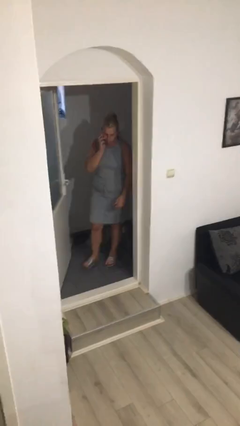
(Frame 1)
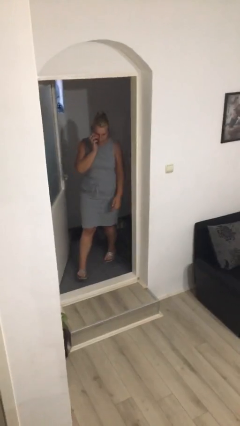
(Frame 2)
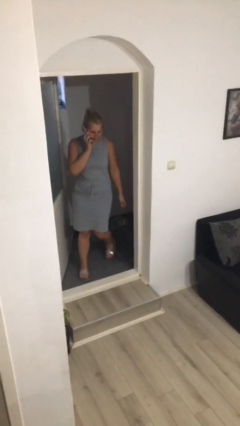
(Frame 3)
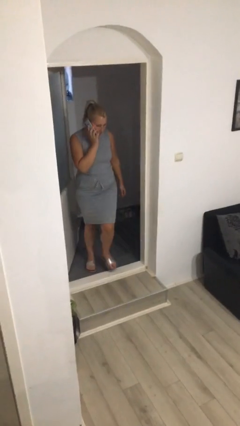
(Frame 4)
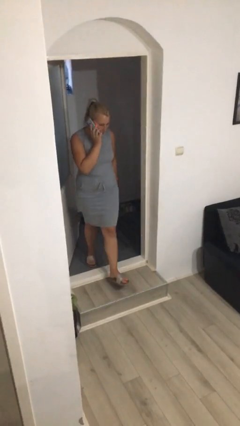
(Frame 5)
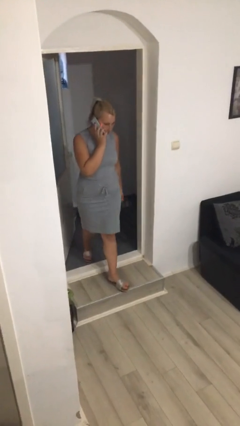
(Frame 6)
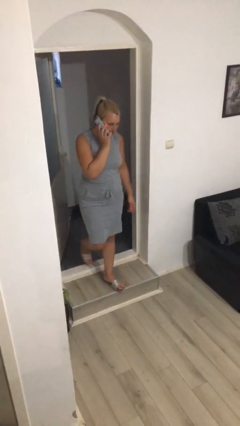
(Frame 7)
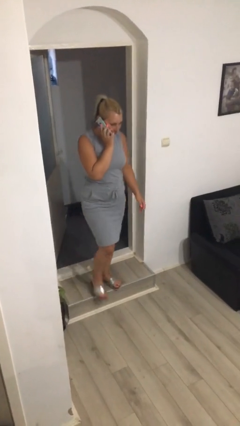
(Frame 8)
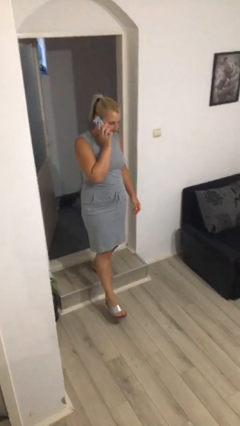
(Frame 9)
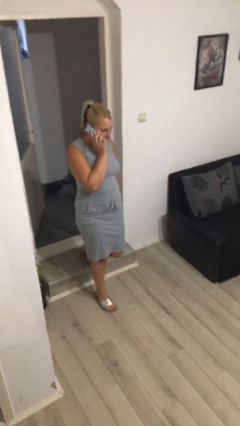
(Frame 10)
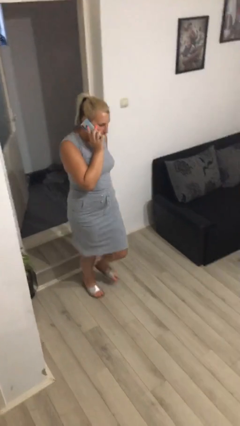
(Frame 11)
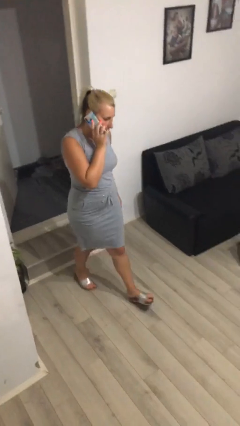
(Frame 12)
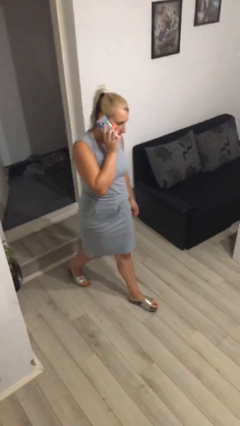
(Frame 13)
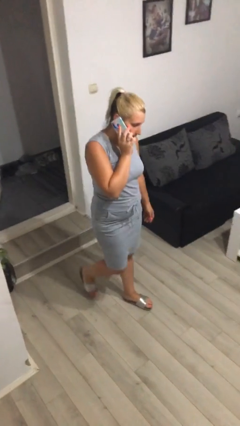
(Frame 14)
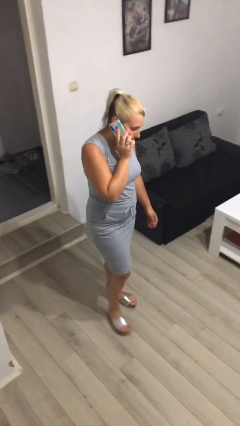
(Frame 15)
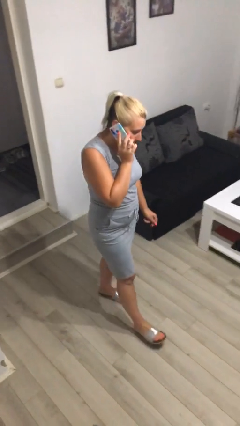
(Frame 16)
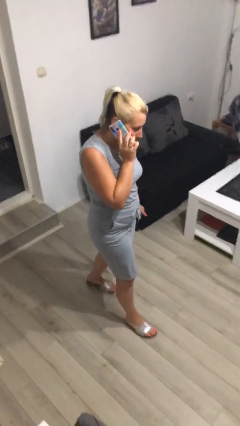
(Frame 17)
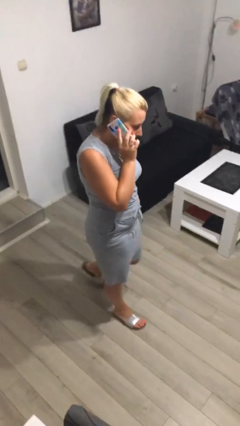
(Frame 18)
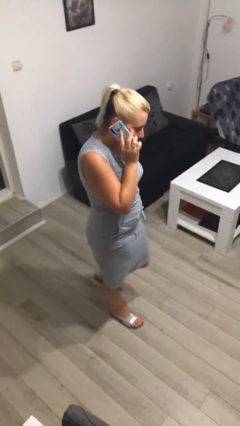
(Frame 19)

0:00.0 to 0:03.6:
person enters scene through structure

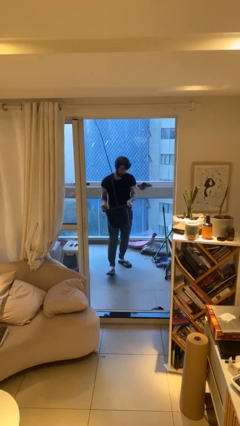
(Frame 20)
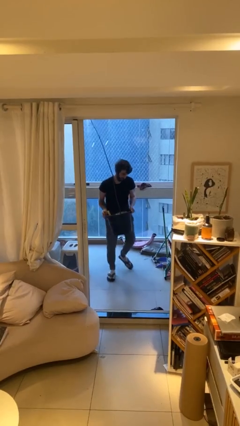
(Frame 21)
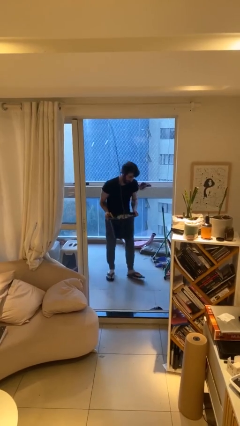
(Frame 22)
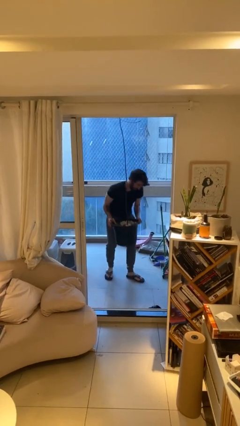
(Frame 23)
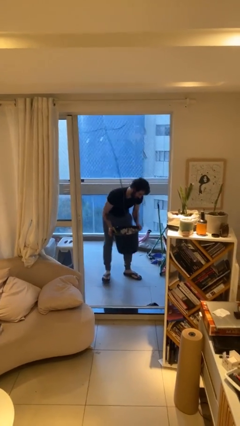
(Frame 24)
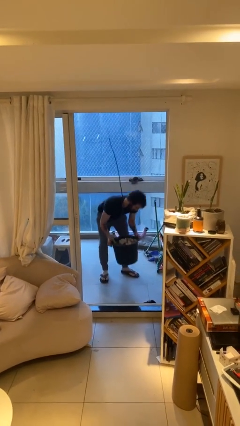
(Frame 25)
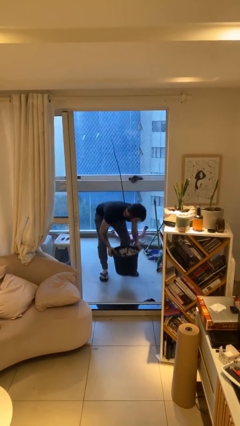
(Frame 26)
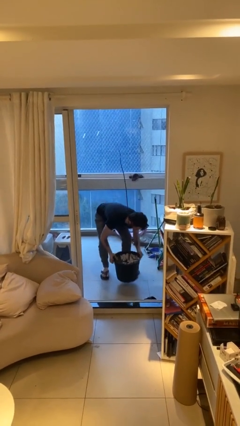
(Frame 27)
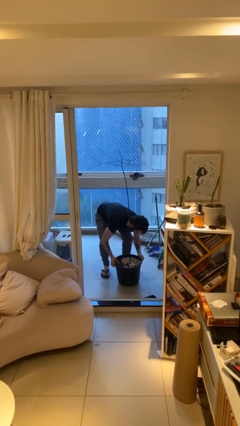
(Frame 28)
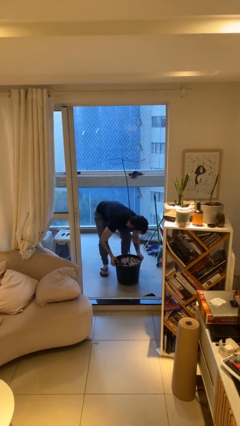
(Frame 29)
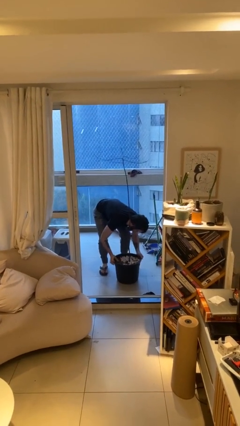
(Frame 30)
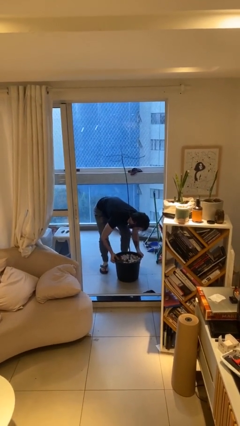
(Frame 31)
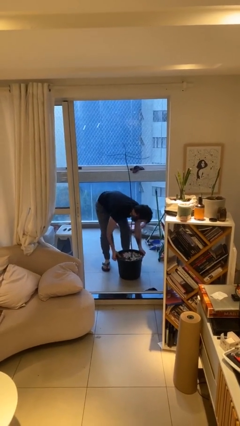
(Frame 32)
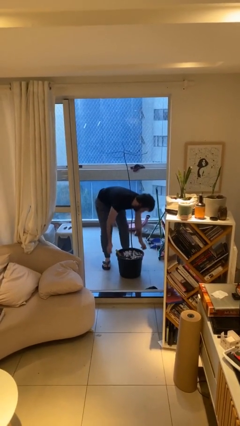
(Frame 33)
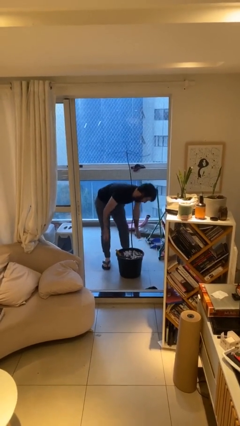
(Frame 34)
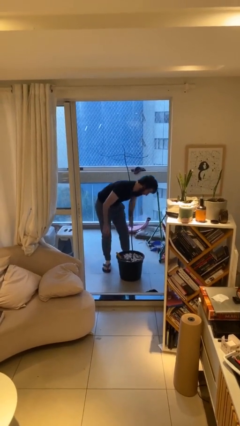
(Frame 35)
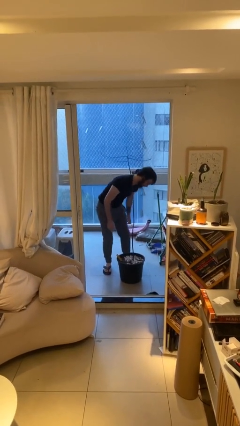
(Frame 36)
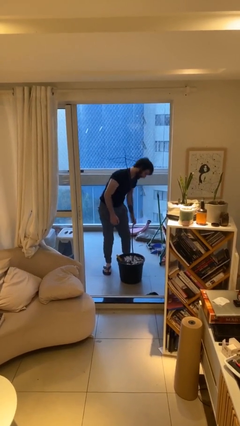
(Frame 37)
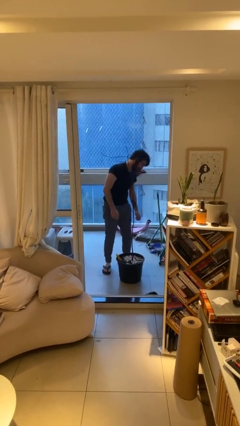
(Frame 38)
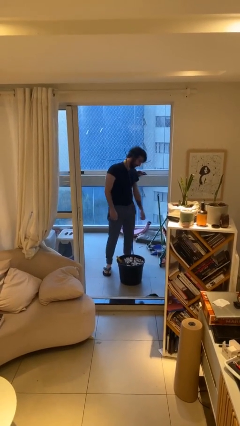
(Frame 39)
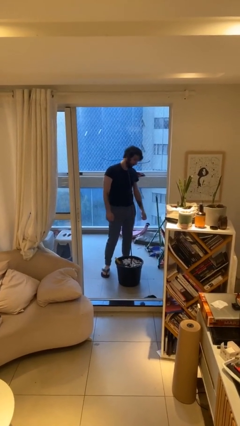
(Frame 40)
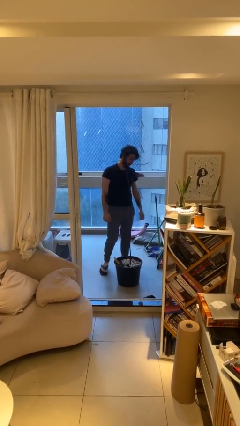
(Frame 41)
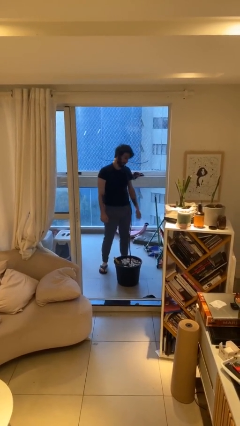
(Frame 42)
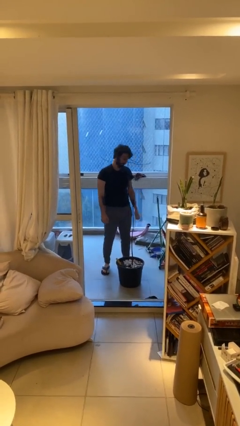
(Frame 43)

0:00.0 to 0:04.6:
person puts down object on floor

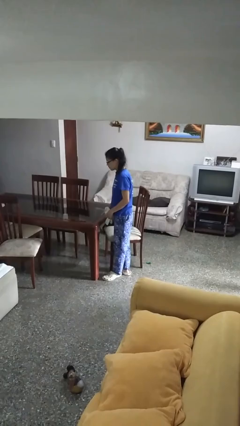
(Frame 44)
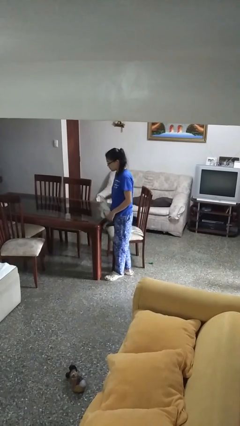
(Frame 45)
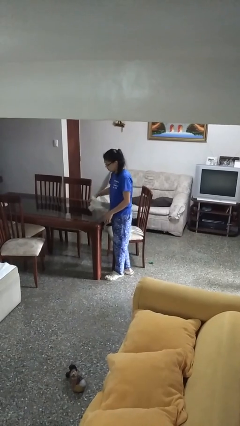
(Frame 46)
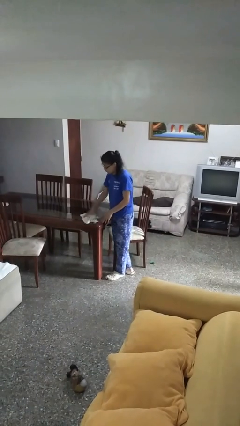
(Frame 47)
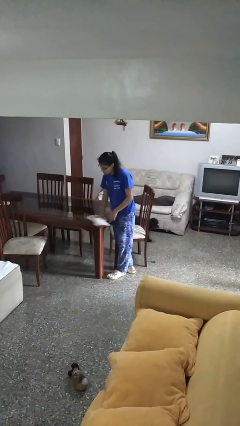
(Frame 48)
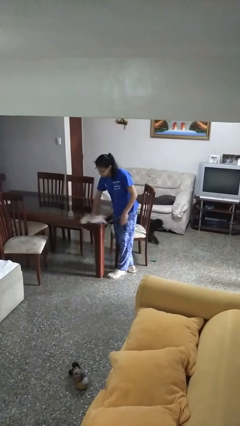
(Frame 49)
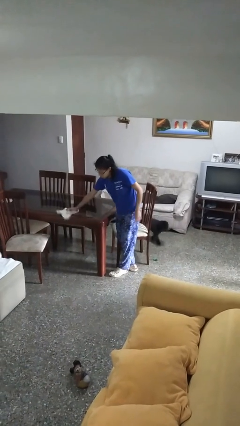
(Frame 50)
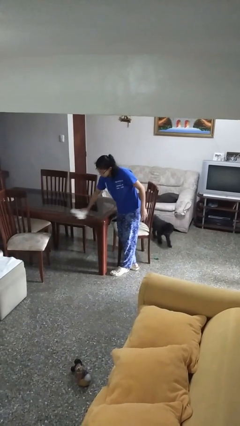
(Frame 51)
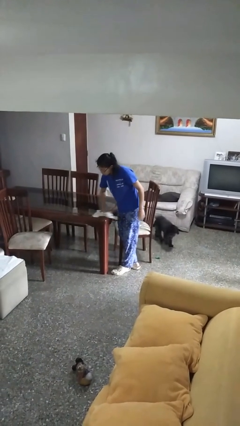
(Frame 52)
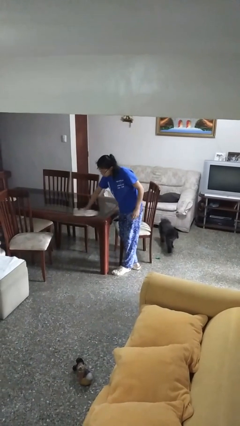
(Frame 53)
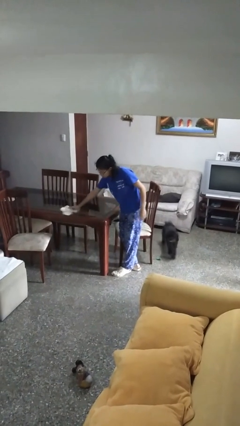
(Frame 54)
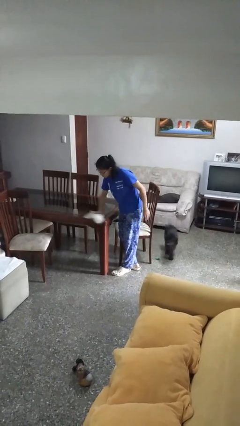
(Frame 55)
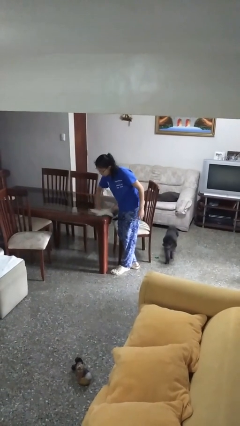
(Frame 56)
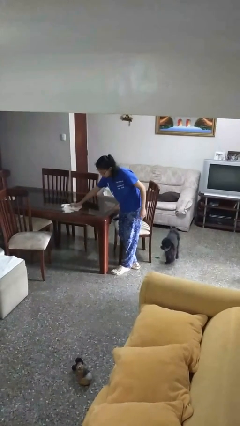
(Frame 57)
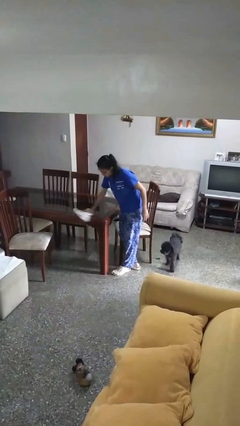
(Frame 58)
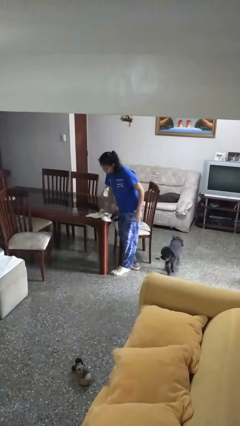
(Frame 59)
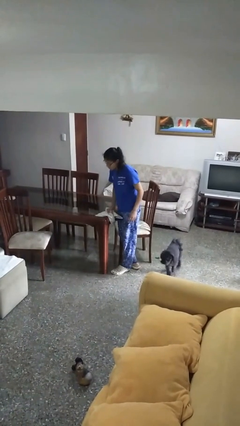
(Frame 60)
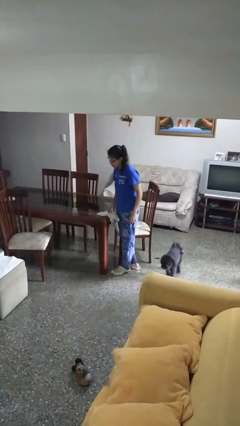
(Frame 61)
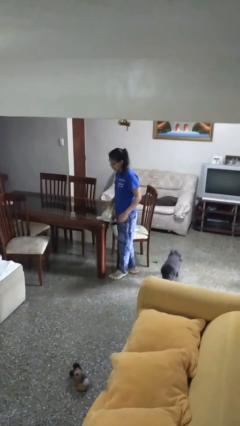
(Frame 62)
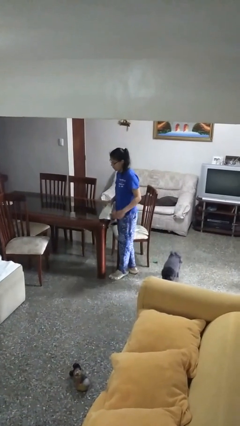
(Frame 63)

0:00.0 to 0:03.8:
person cleans table with rag

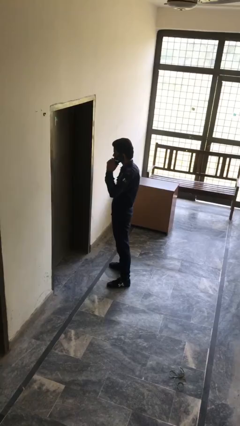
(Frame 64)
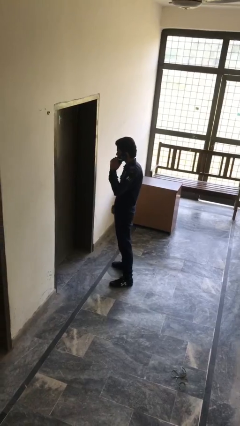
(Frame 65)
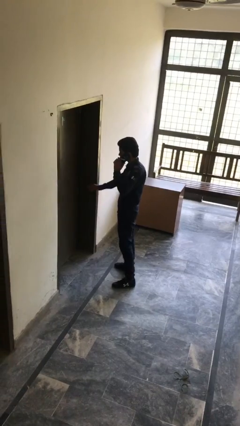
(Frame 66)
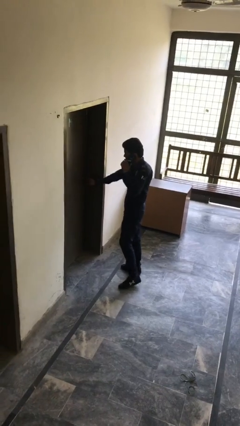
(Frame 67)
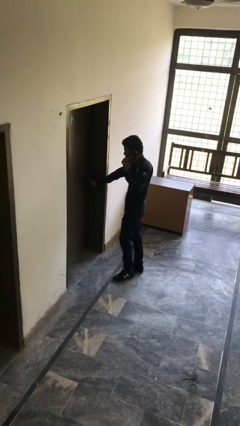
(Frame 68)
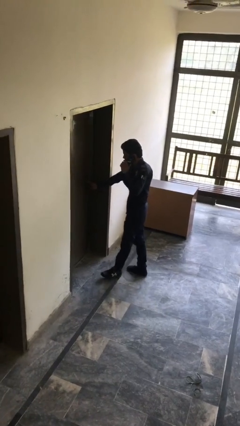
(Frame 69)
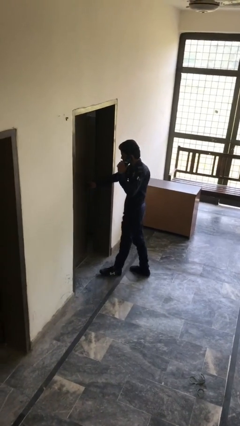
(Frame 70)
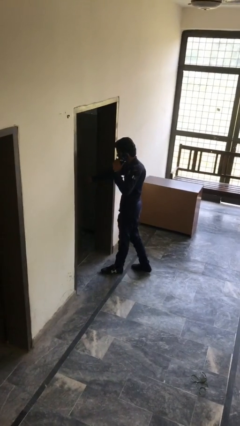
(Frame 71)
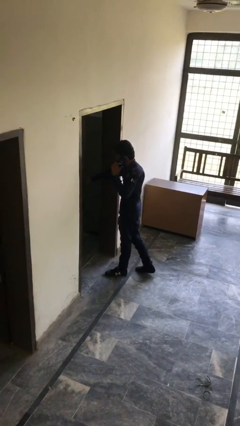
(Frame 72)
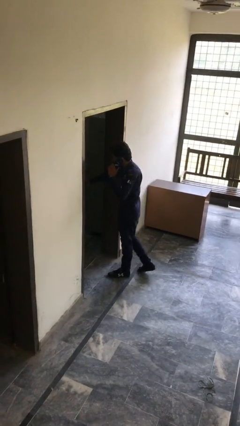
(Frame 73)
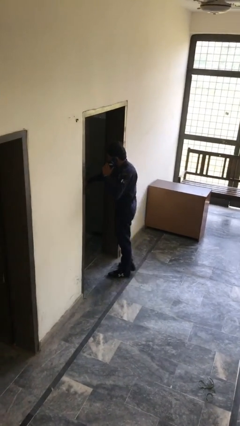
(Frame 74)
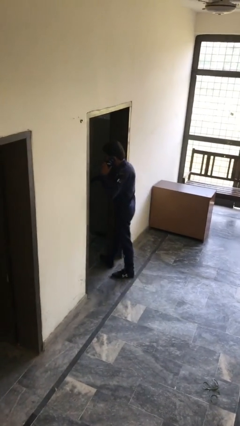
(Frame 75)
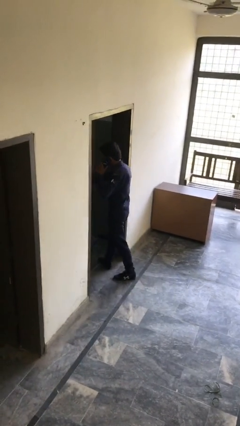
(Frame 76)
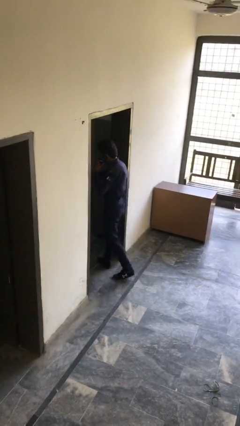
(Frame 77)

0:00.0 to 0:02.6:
person opens facility door

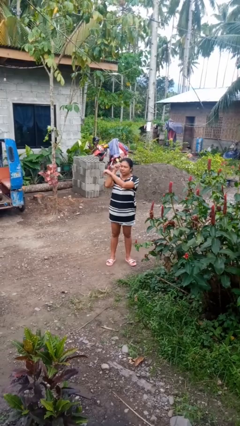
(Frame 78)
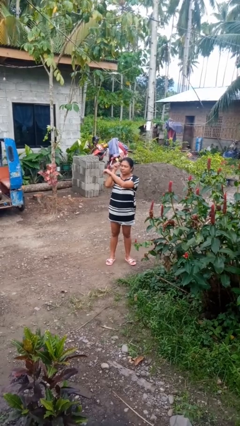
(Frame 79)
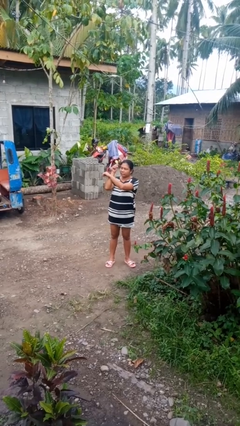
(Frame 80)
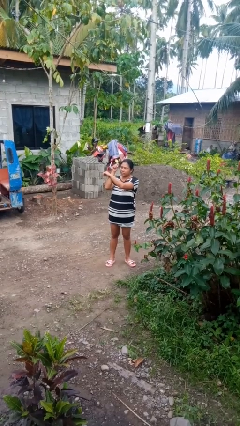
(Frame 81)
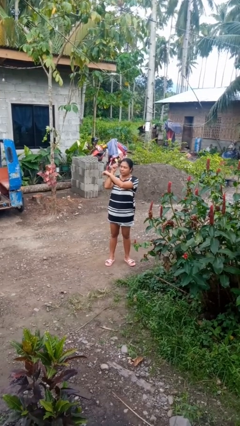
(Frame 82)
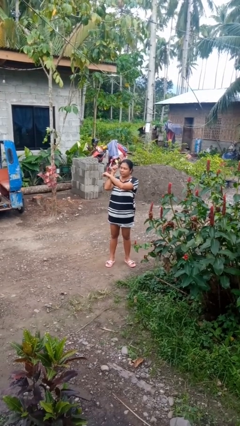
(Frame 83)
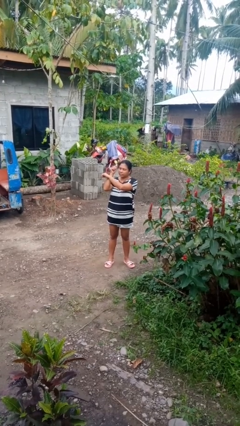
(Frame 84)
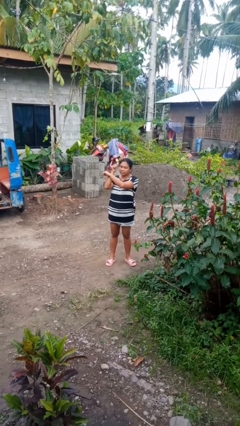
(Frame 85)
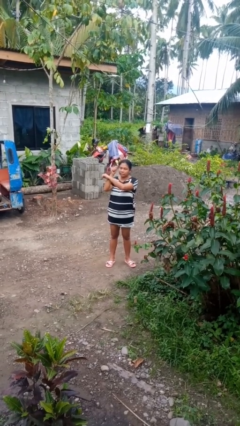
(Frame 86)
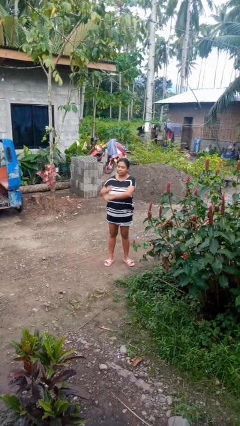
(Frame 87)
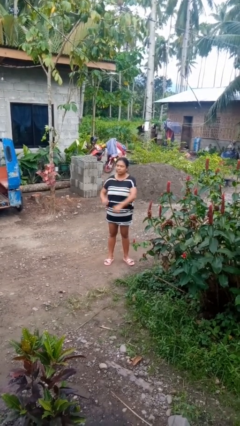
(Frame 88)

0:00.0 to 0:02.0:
person gestures arms x

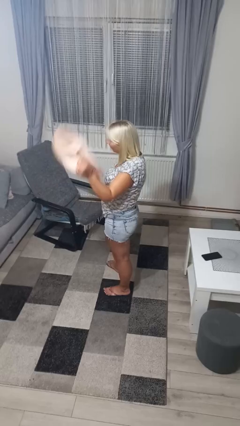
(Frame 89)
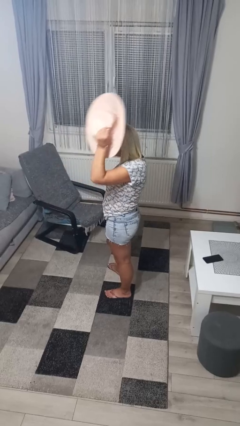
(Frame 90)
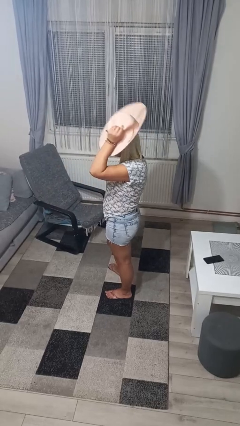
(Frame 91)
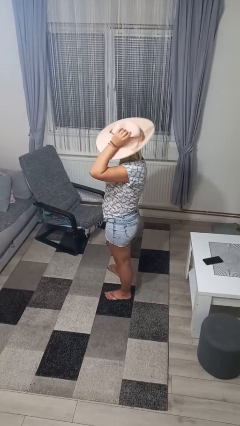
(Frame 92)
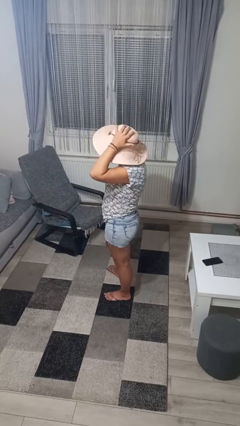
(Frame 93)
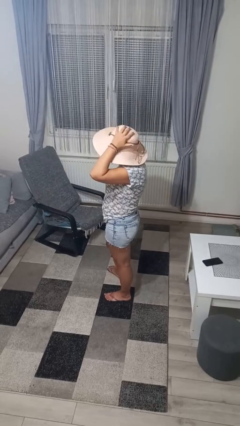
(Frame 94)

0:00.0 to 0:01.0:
person puts on hat
